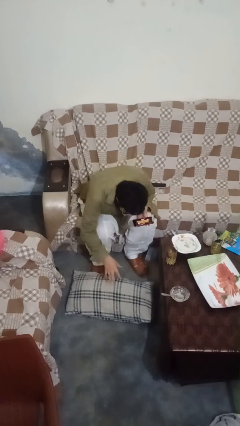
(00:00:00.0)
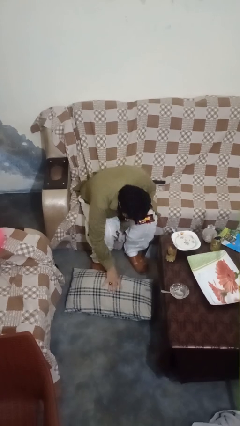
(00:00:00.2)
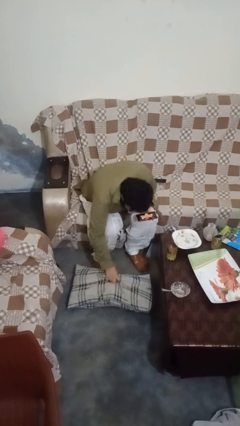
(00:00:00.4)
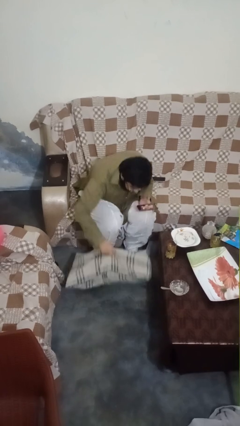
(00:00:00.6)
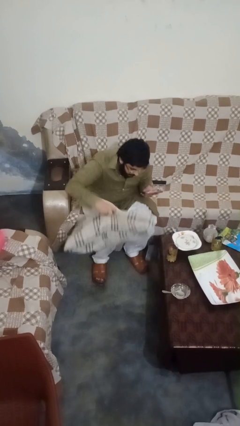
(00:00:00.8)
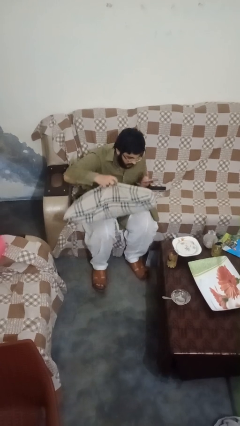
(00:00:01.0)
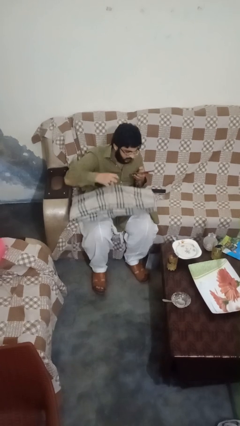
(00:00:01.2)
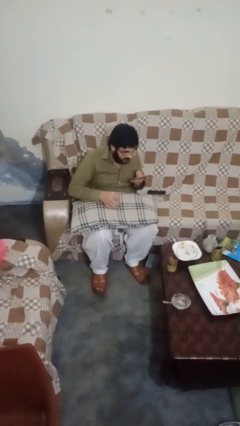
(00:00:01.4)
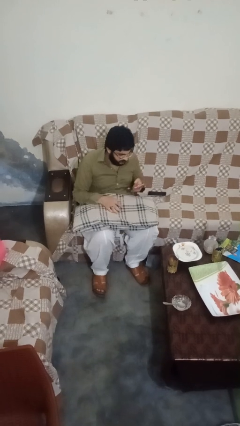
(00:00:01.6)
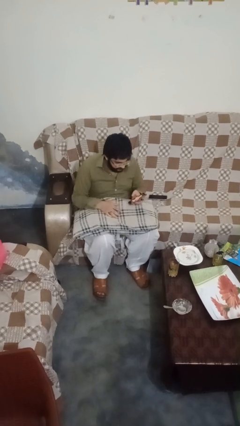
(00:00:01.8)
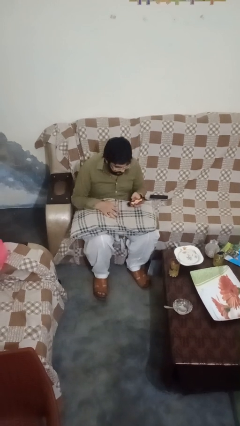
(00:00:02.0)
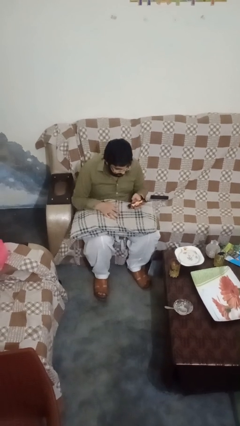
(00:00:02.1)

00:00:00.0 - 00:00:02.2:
person picks up object from floor

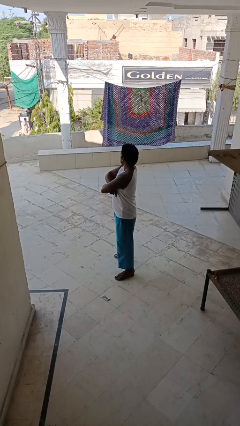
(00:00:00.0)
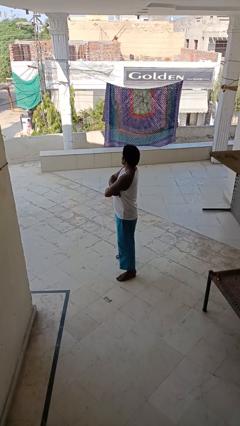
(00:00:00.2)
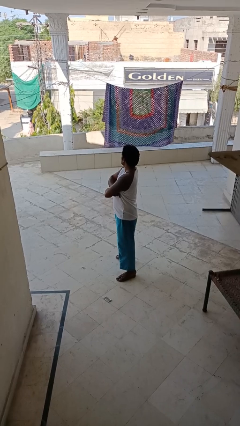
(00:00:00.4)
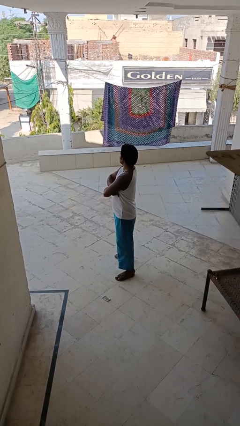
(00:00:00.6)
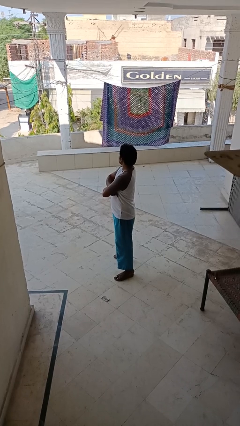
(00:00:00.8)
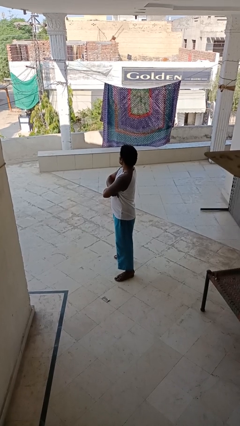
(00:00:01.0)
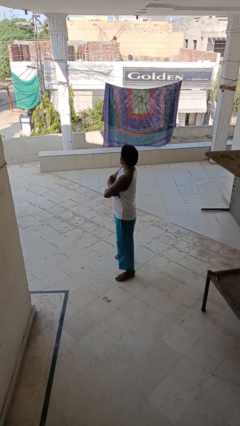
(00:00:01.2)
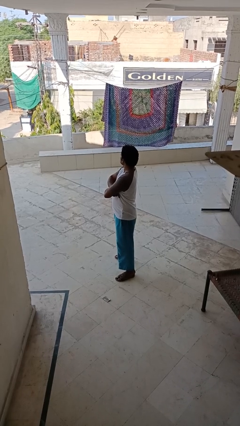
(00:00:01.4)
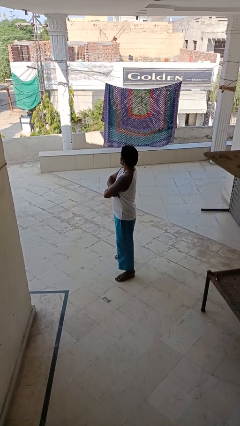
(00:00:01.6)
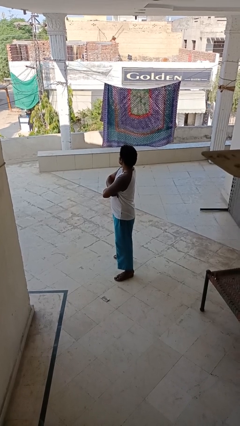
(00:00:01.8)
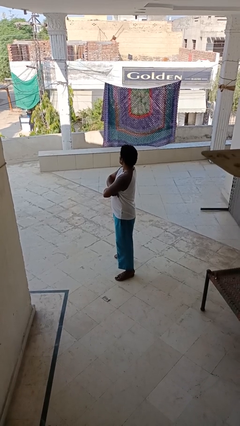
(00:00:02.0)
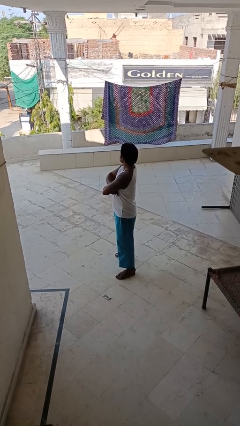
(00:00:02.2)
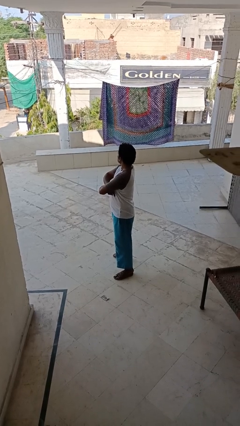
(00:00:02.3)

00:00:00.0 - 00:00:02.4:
person crosses arms

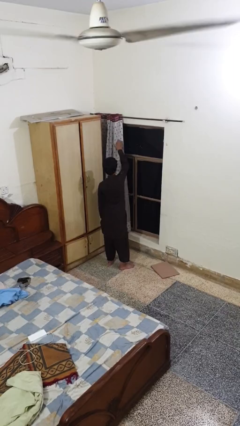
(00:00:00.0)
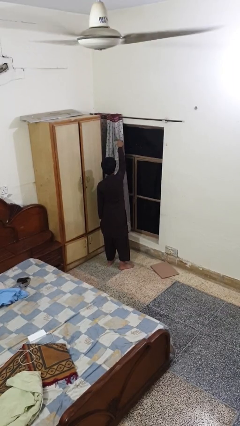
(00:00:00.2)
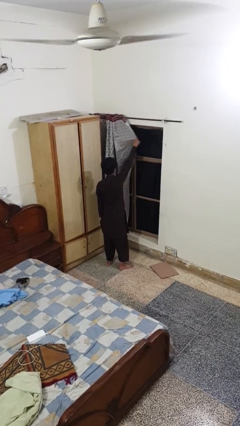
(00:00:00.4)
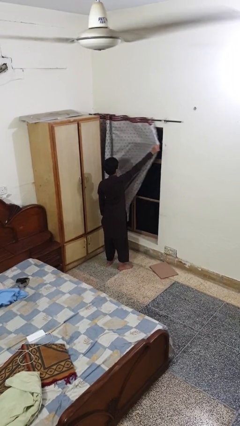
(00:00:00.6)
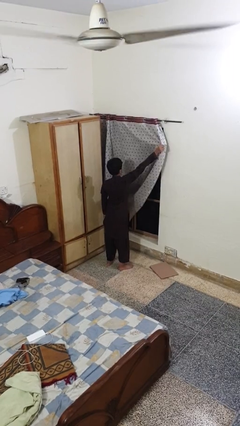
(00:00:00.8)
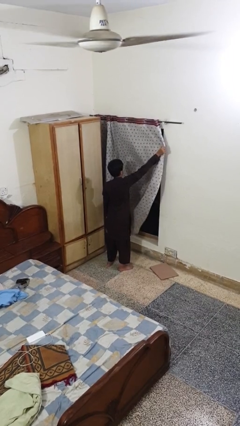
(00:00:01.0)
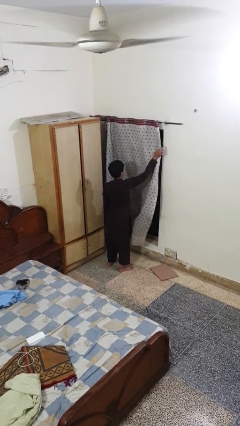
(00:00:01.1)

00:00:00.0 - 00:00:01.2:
person closes curtains

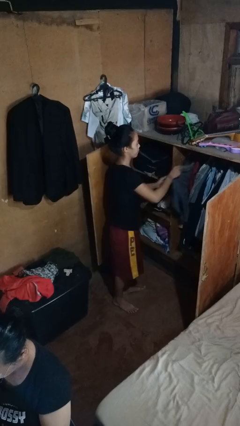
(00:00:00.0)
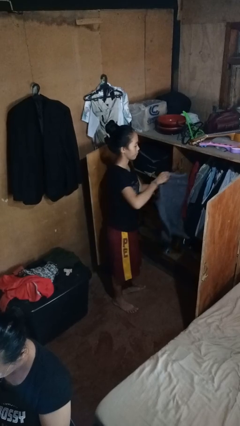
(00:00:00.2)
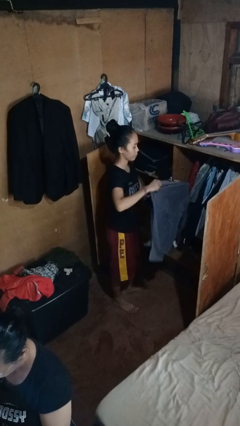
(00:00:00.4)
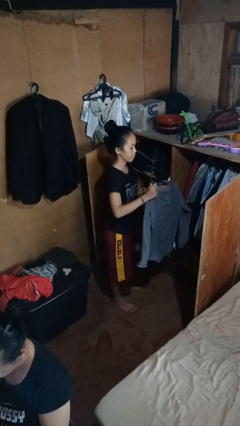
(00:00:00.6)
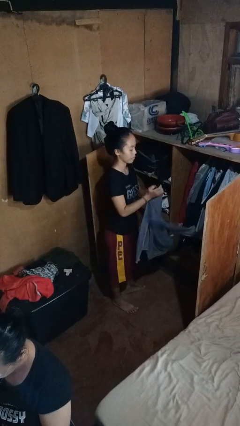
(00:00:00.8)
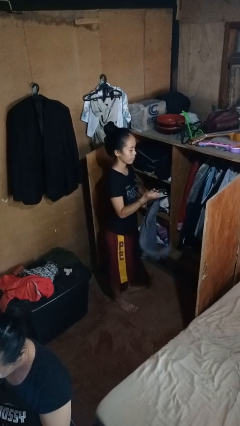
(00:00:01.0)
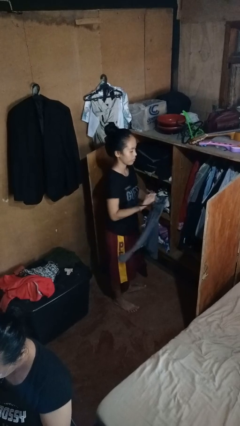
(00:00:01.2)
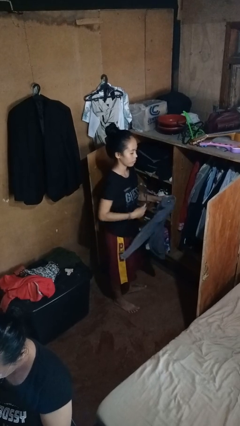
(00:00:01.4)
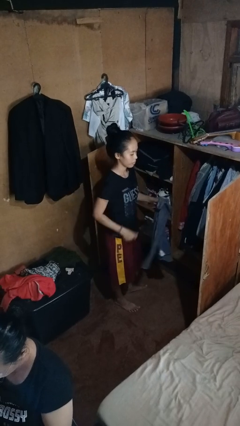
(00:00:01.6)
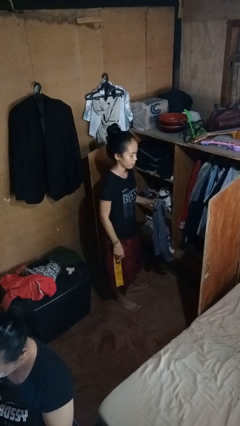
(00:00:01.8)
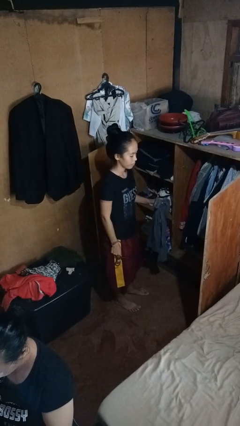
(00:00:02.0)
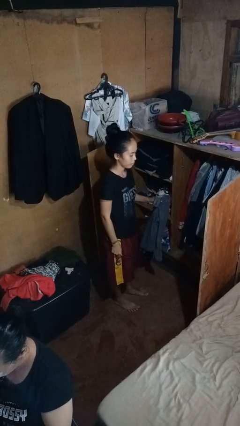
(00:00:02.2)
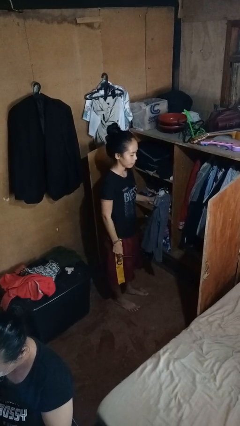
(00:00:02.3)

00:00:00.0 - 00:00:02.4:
person takes clothes from closet

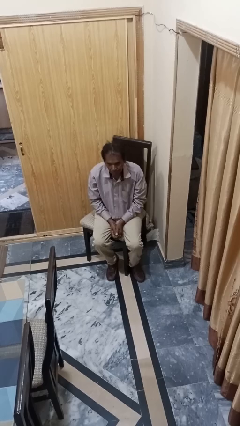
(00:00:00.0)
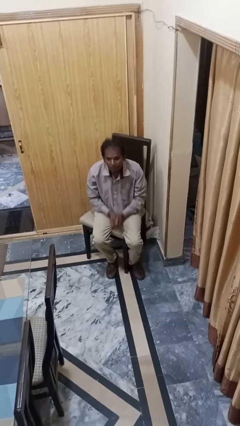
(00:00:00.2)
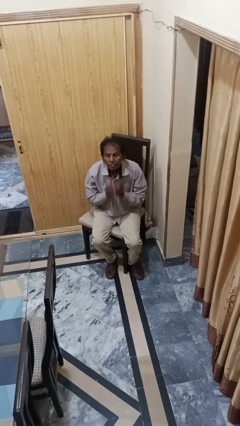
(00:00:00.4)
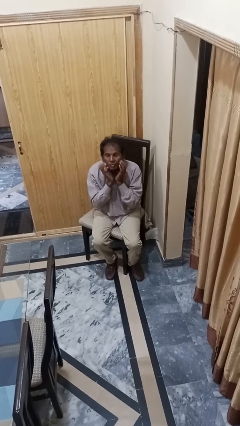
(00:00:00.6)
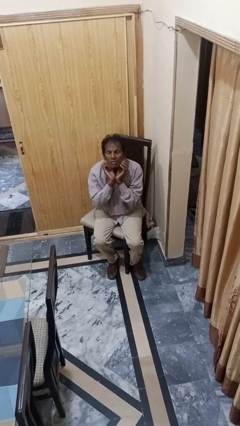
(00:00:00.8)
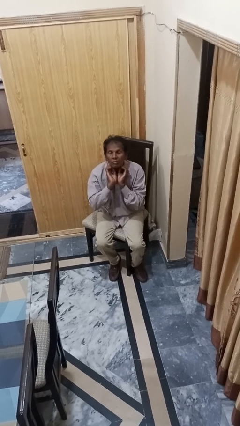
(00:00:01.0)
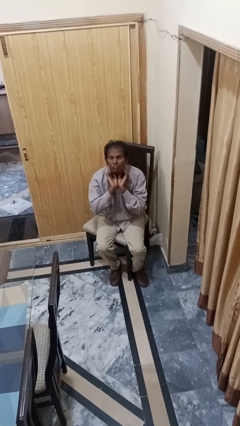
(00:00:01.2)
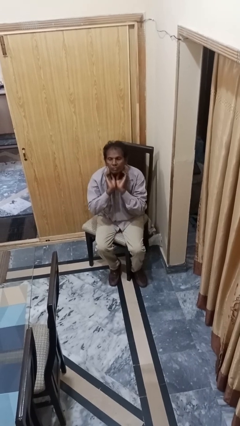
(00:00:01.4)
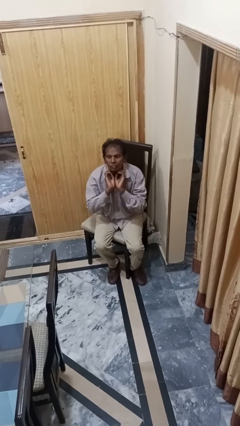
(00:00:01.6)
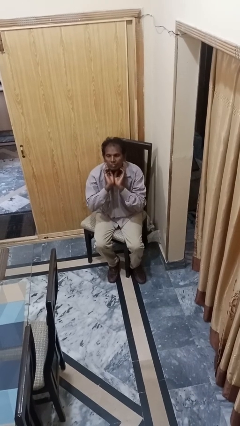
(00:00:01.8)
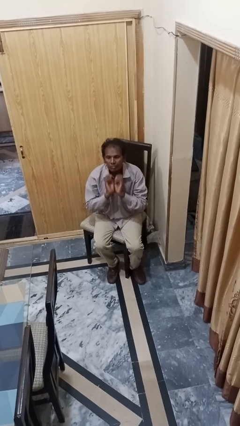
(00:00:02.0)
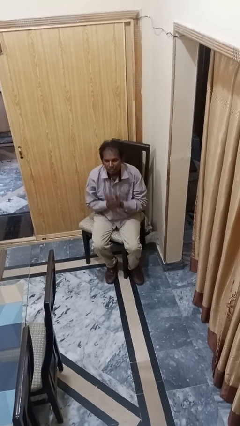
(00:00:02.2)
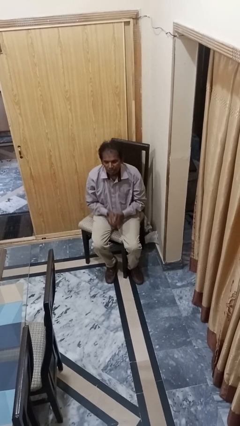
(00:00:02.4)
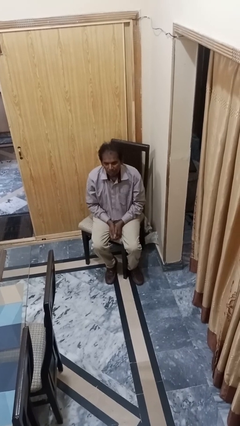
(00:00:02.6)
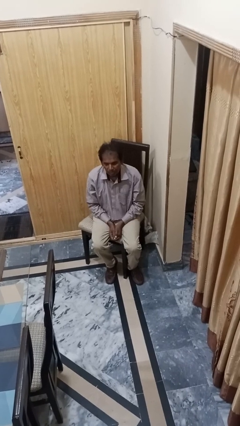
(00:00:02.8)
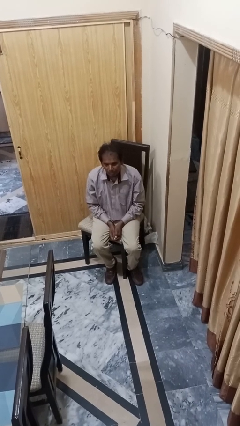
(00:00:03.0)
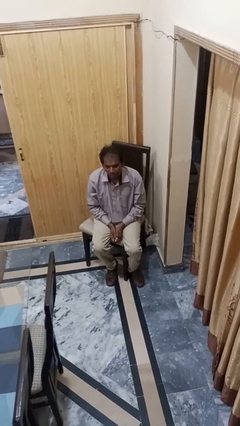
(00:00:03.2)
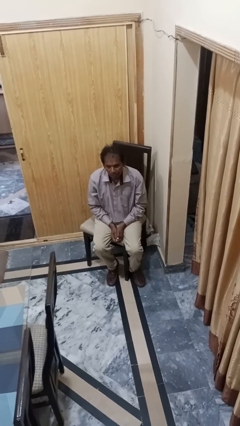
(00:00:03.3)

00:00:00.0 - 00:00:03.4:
person scratches face

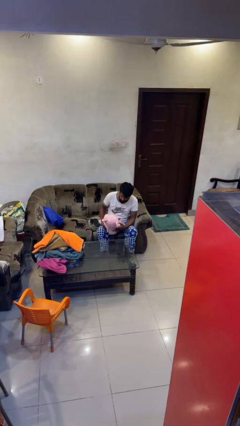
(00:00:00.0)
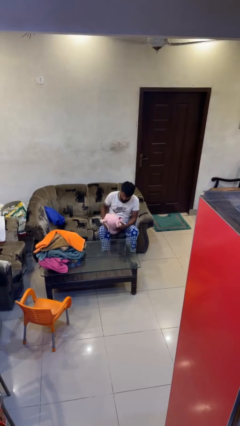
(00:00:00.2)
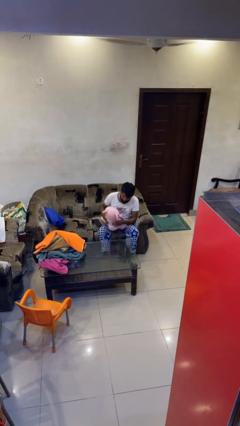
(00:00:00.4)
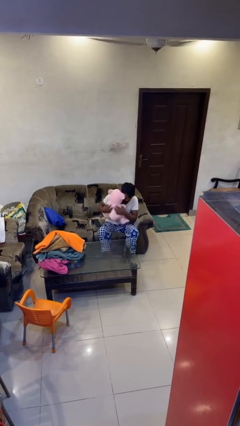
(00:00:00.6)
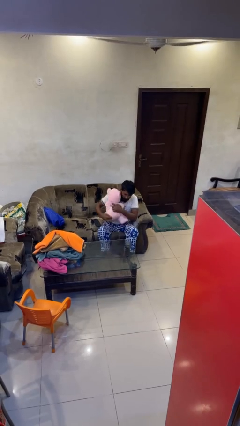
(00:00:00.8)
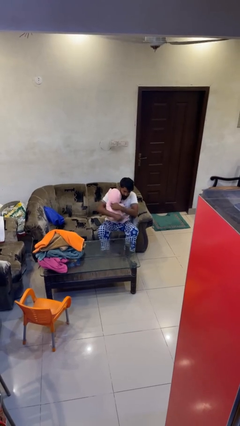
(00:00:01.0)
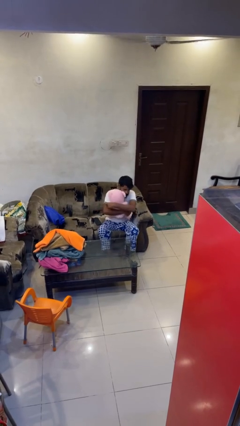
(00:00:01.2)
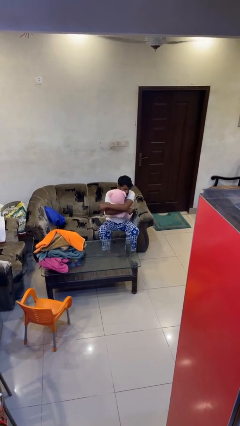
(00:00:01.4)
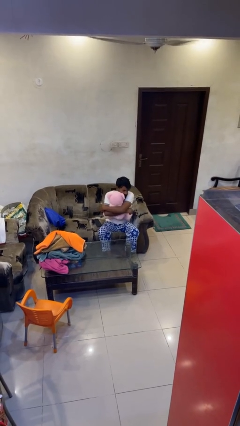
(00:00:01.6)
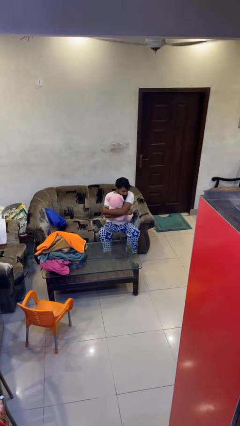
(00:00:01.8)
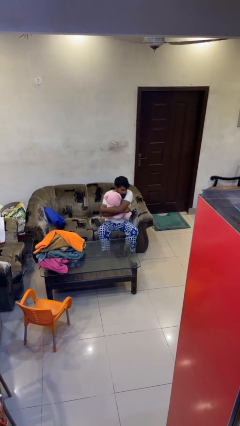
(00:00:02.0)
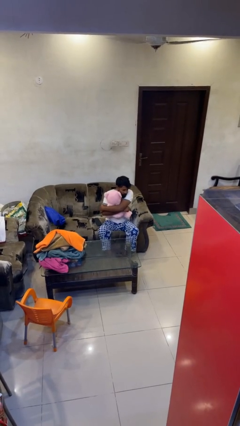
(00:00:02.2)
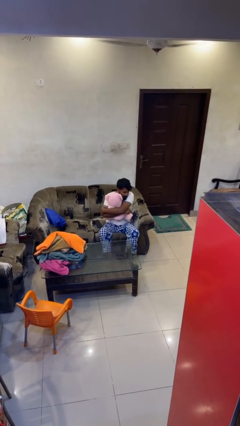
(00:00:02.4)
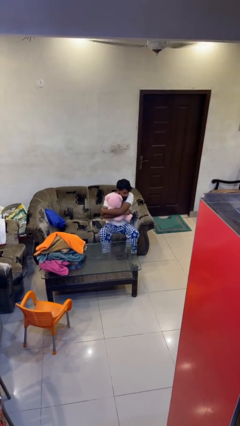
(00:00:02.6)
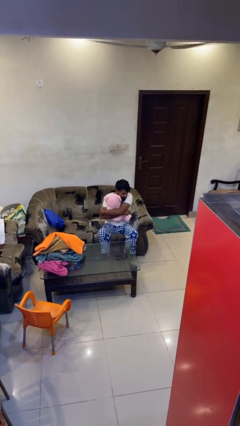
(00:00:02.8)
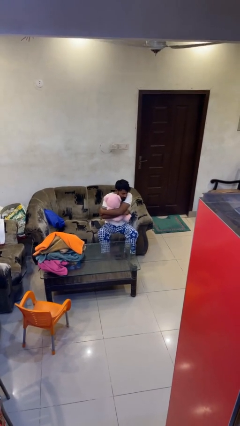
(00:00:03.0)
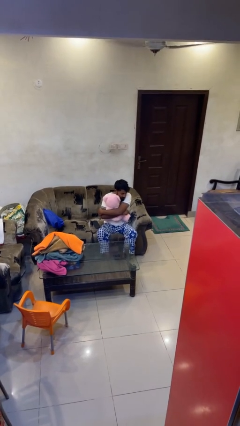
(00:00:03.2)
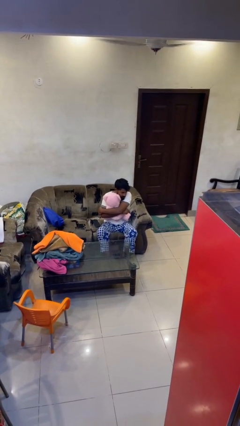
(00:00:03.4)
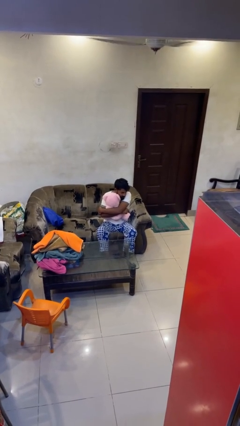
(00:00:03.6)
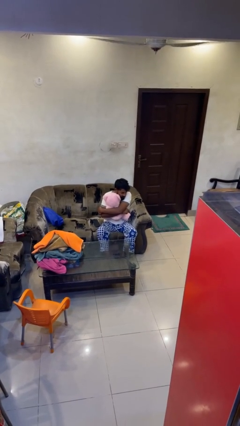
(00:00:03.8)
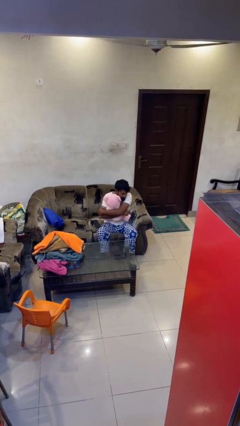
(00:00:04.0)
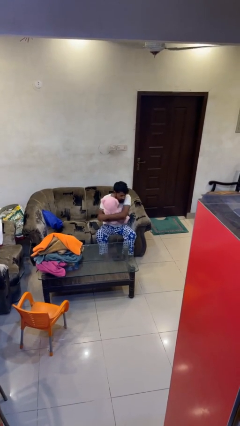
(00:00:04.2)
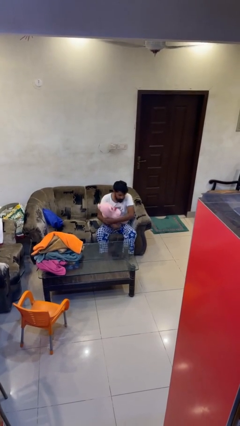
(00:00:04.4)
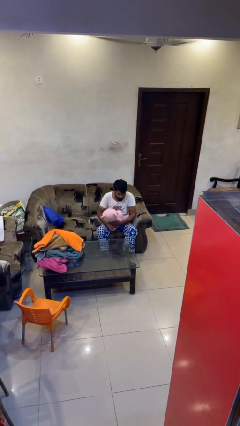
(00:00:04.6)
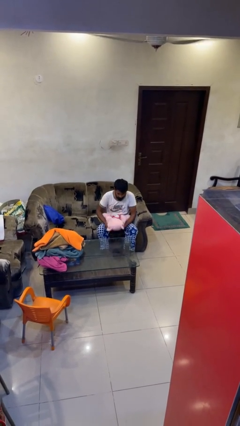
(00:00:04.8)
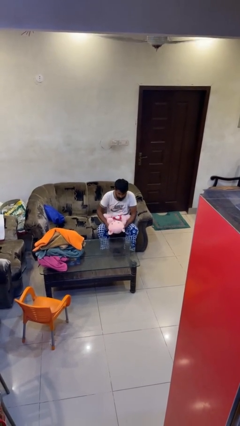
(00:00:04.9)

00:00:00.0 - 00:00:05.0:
person hugs stuffed animal

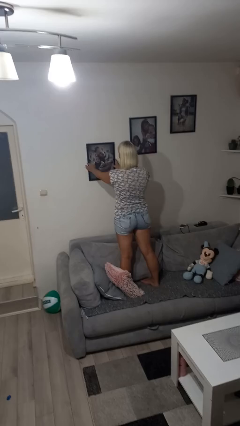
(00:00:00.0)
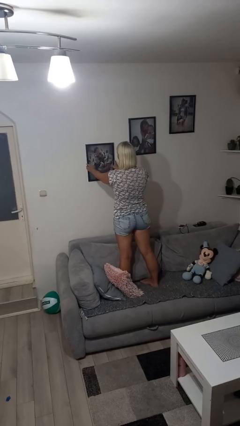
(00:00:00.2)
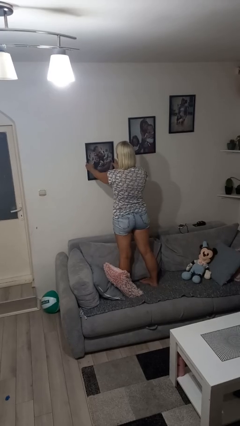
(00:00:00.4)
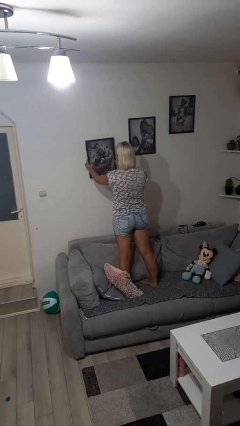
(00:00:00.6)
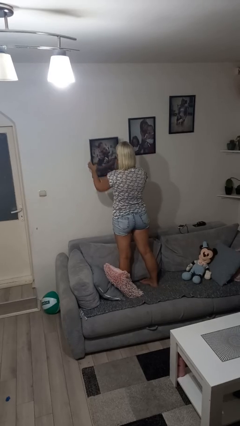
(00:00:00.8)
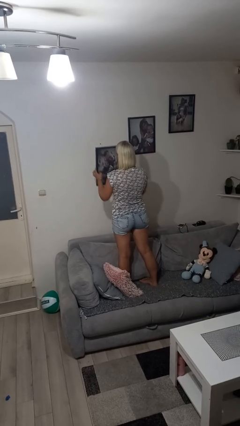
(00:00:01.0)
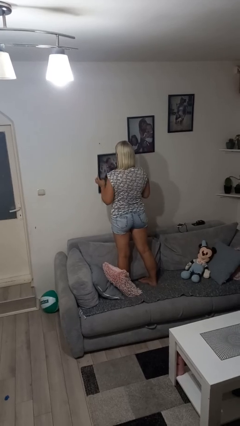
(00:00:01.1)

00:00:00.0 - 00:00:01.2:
person takes down picture frame
